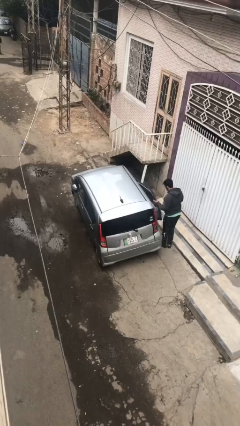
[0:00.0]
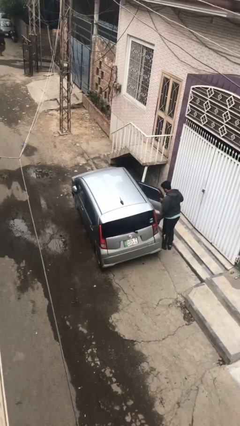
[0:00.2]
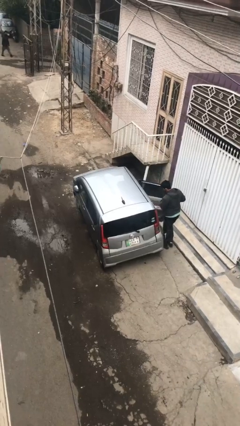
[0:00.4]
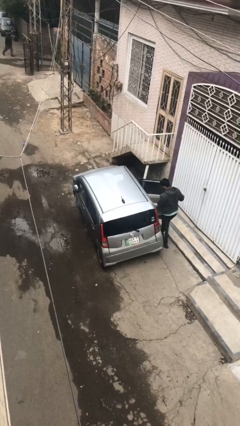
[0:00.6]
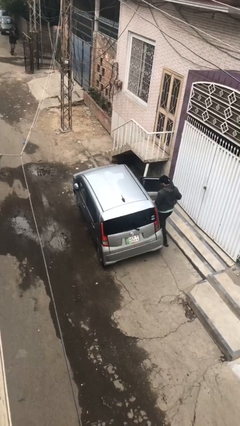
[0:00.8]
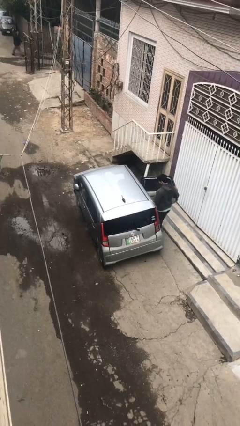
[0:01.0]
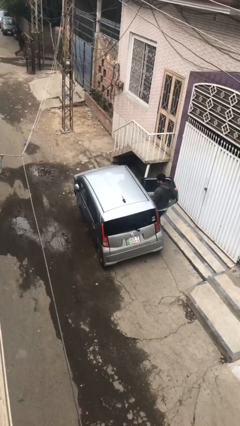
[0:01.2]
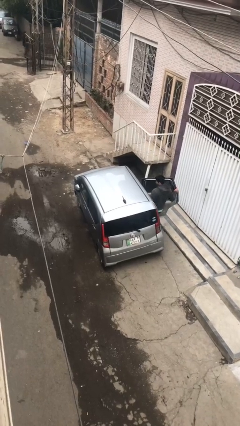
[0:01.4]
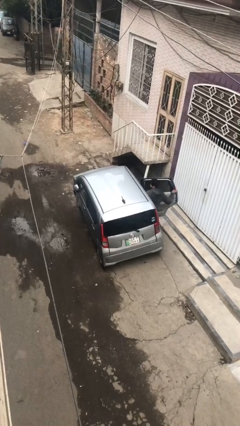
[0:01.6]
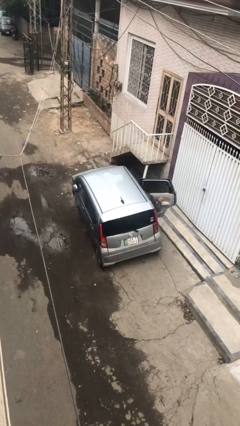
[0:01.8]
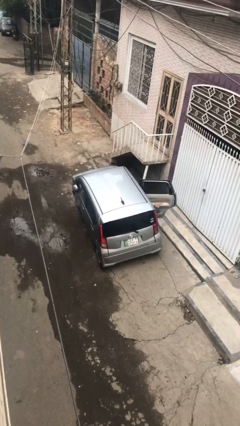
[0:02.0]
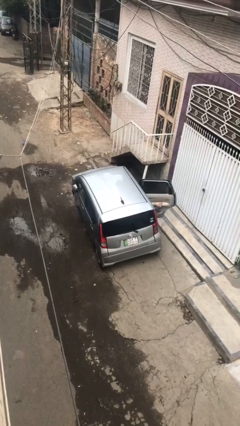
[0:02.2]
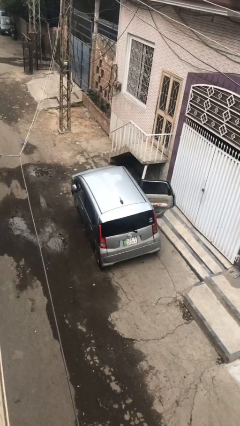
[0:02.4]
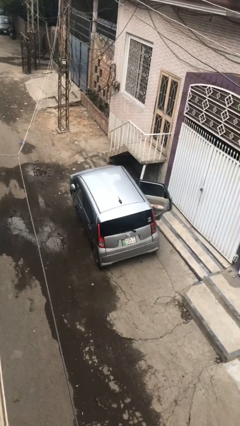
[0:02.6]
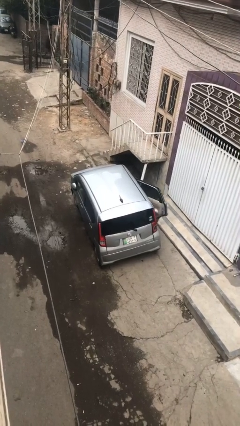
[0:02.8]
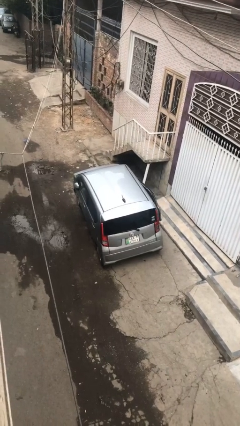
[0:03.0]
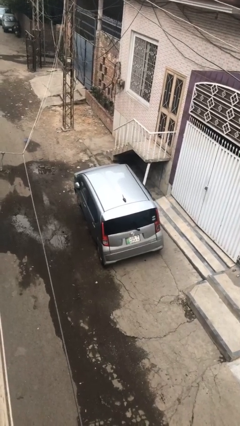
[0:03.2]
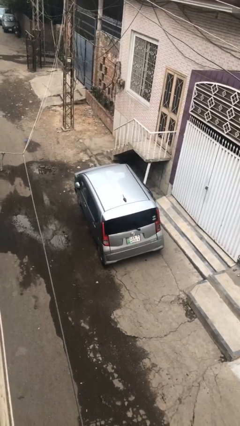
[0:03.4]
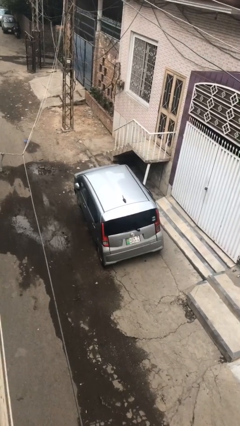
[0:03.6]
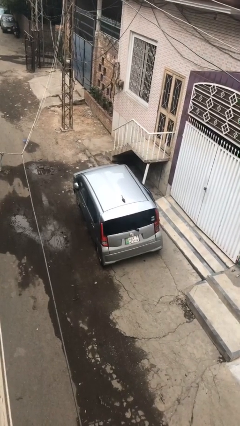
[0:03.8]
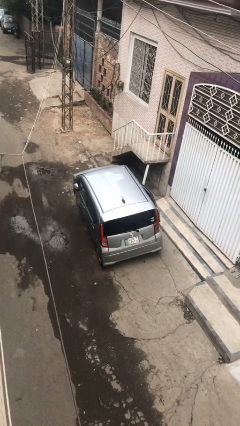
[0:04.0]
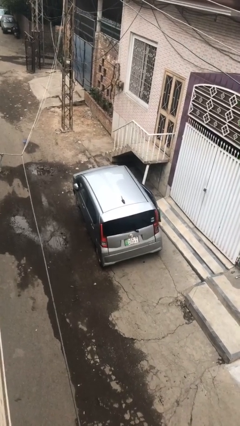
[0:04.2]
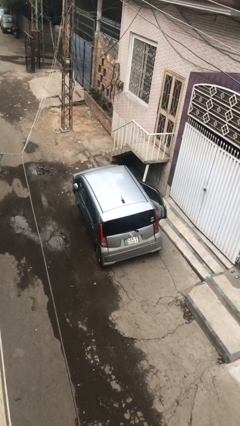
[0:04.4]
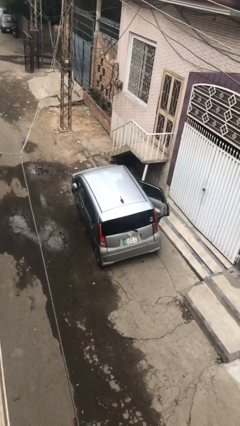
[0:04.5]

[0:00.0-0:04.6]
car picks up person

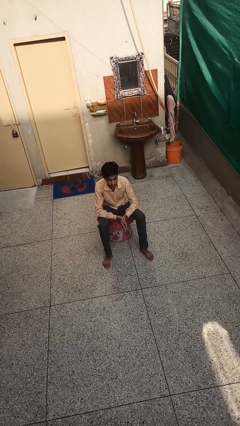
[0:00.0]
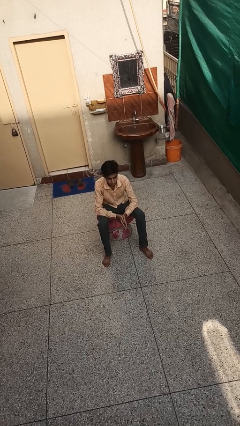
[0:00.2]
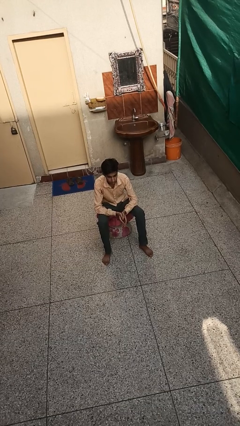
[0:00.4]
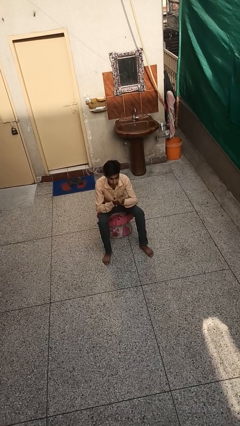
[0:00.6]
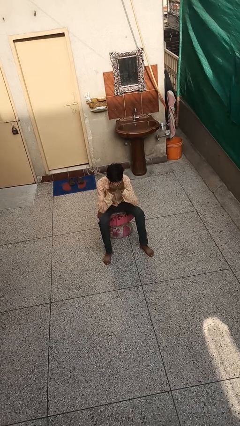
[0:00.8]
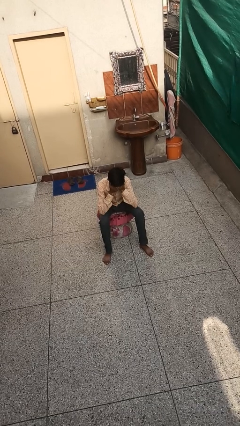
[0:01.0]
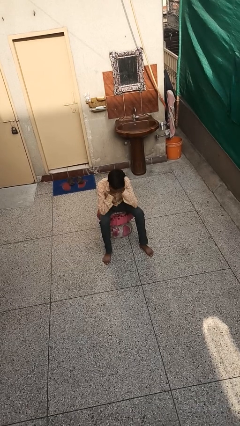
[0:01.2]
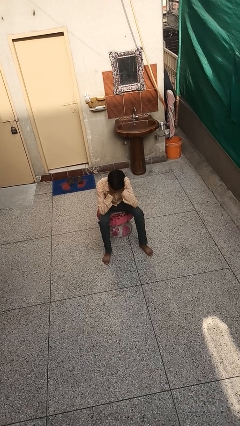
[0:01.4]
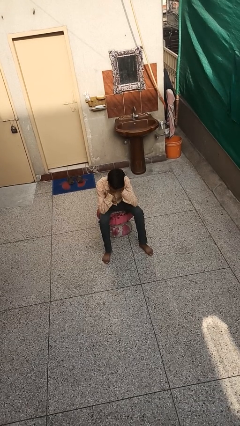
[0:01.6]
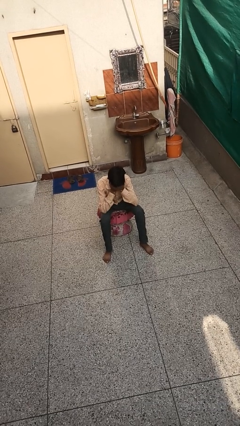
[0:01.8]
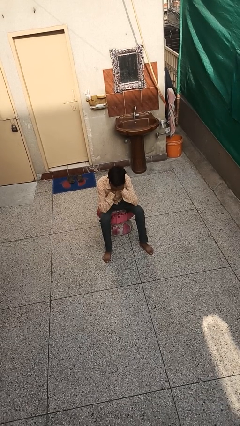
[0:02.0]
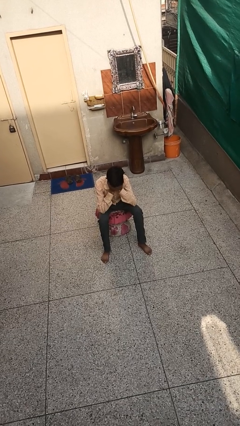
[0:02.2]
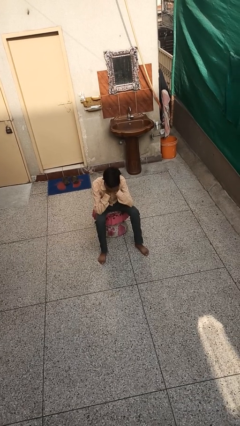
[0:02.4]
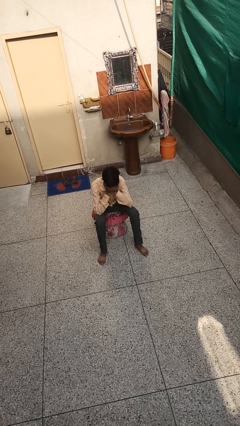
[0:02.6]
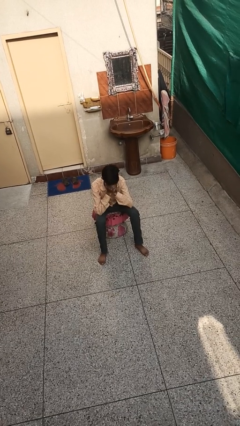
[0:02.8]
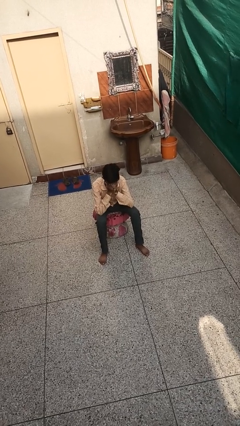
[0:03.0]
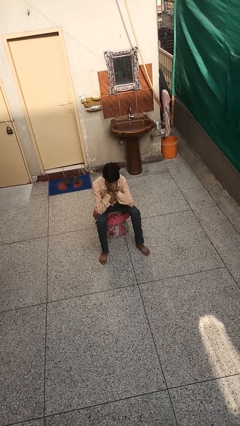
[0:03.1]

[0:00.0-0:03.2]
person covers face with hands

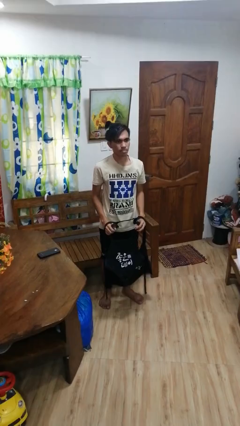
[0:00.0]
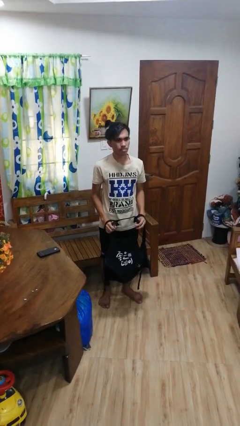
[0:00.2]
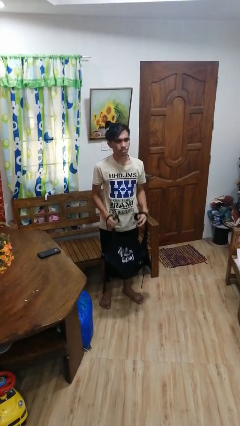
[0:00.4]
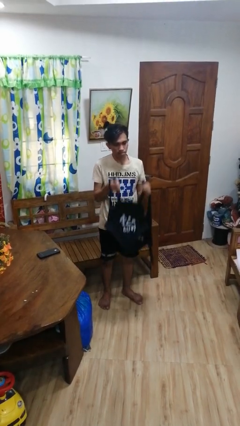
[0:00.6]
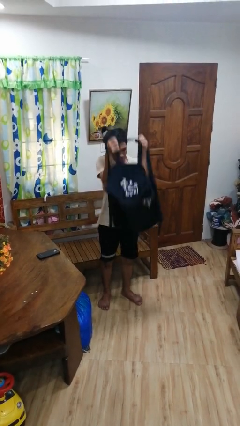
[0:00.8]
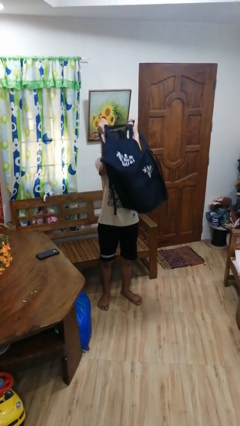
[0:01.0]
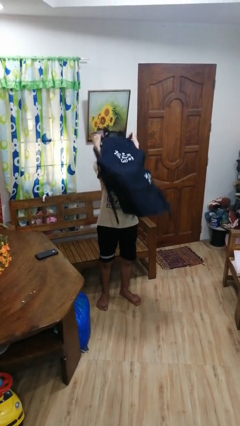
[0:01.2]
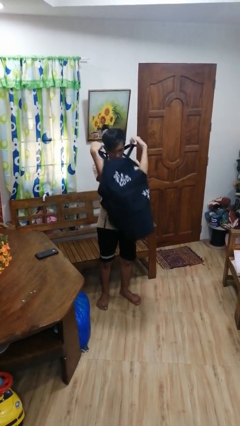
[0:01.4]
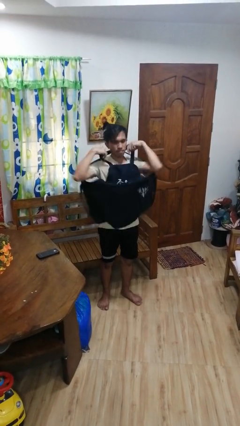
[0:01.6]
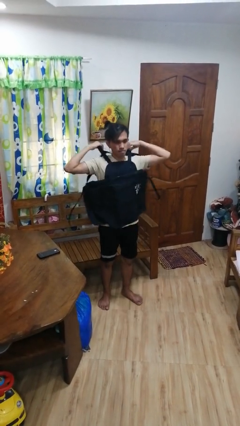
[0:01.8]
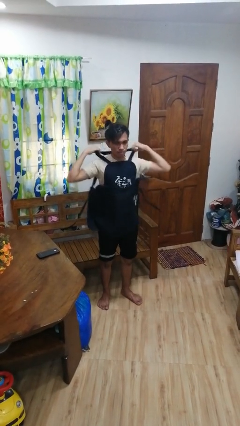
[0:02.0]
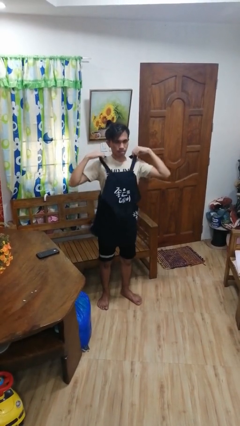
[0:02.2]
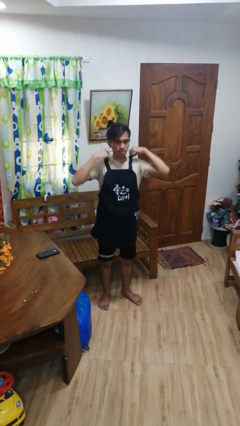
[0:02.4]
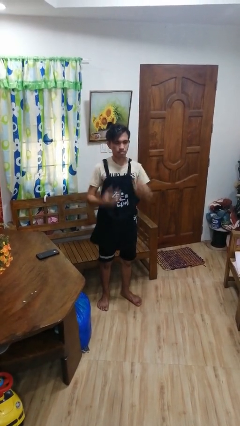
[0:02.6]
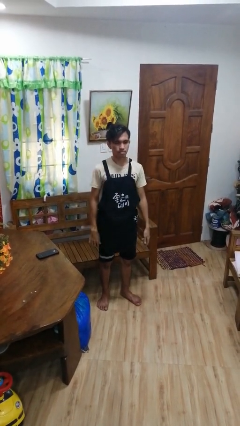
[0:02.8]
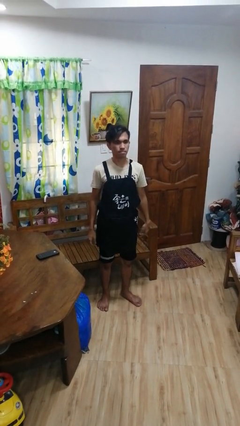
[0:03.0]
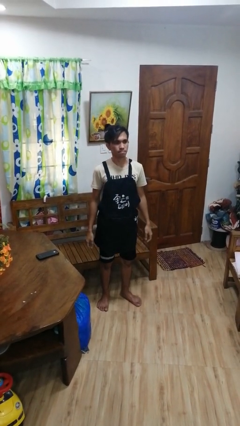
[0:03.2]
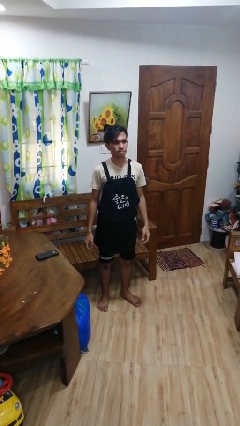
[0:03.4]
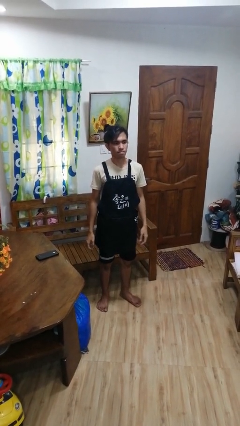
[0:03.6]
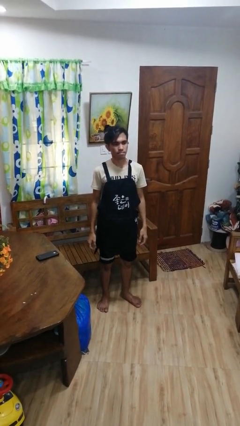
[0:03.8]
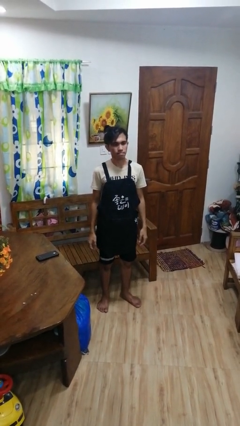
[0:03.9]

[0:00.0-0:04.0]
person puts on apron

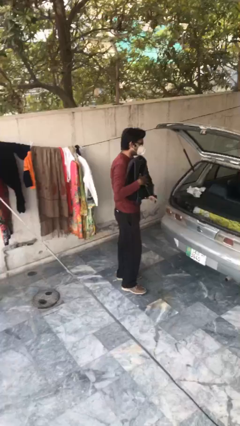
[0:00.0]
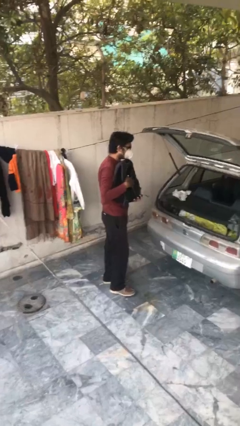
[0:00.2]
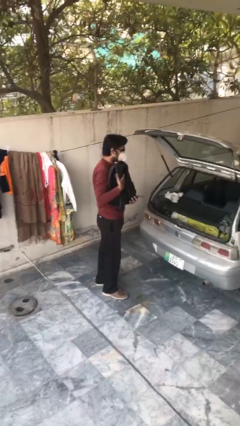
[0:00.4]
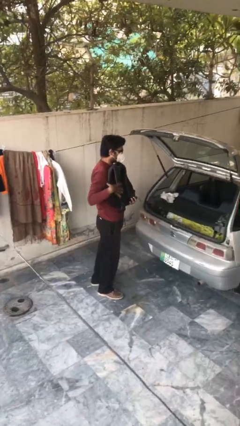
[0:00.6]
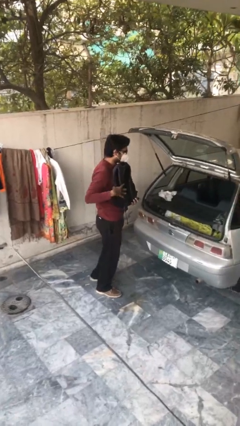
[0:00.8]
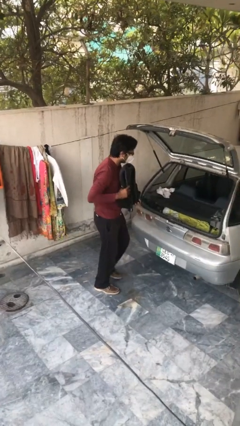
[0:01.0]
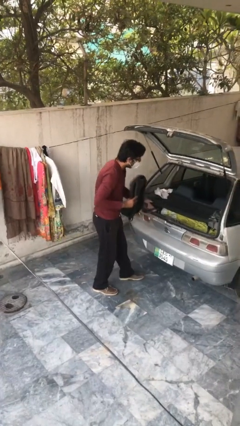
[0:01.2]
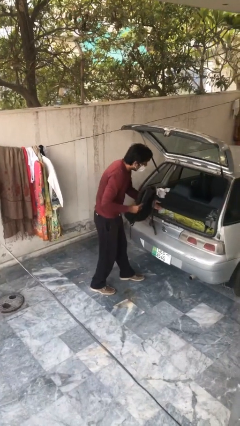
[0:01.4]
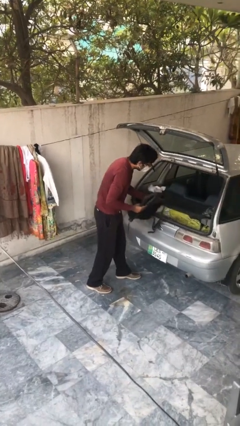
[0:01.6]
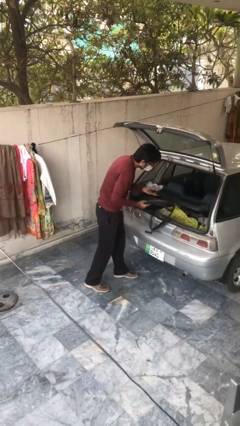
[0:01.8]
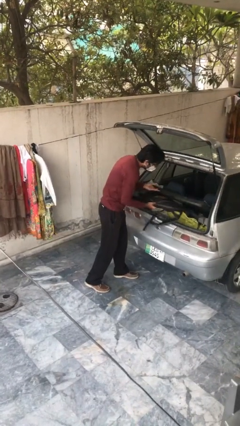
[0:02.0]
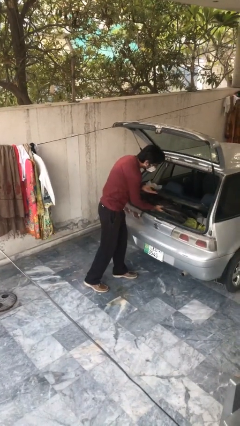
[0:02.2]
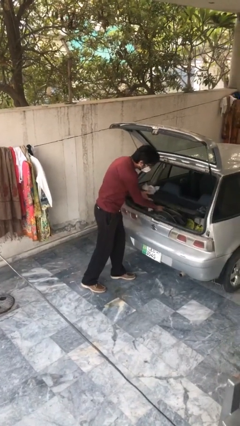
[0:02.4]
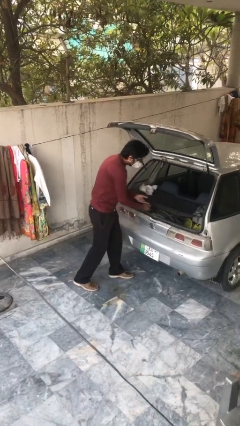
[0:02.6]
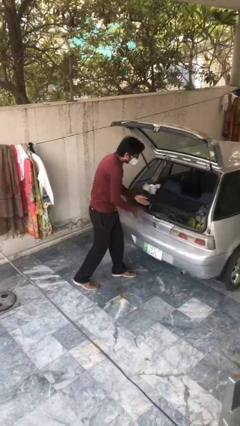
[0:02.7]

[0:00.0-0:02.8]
person loads car

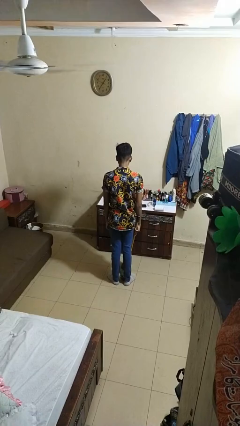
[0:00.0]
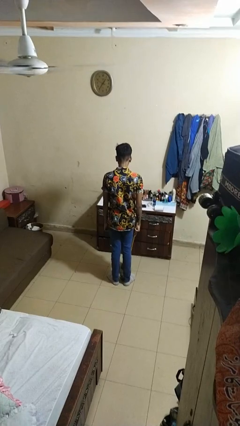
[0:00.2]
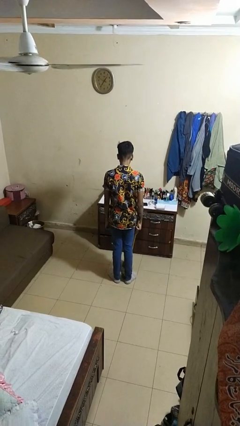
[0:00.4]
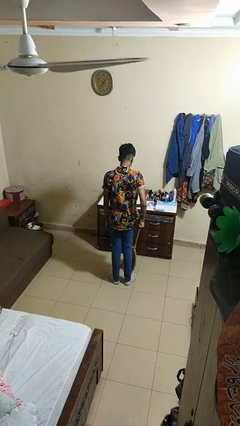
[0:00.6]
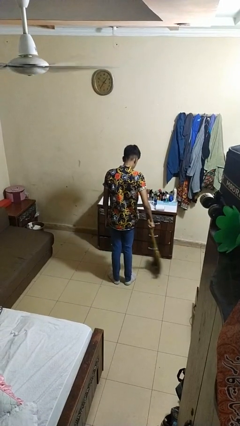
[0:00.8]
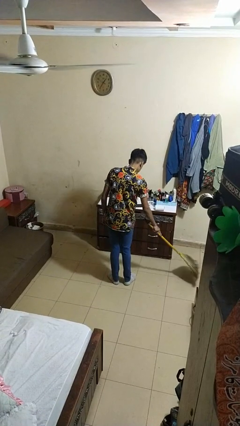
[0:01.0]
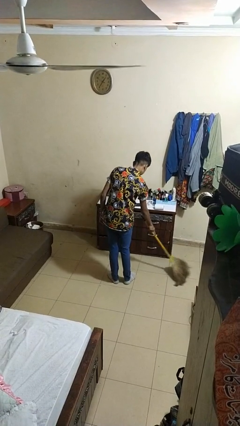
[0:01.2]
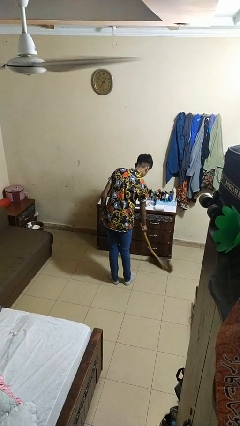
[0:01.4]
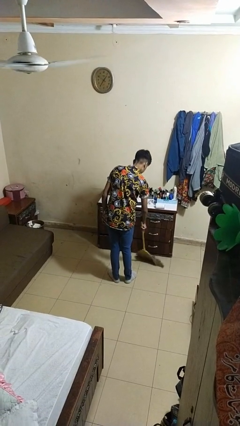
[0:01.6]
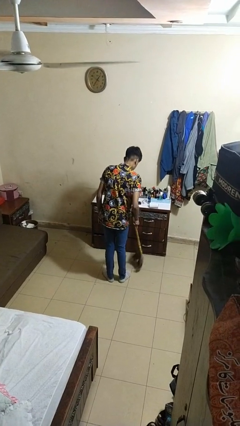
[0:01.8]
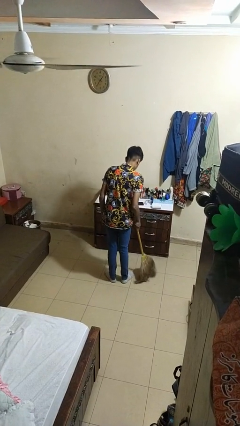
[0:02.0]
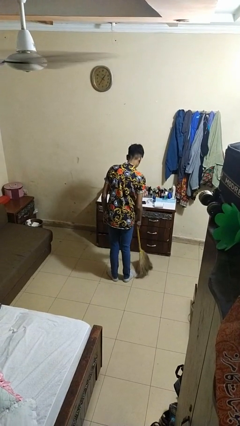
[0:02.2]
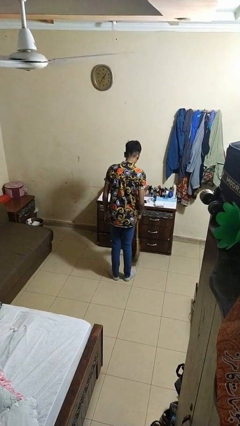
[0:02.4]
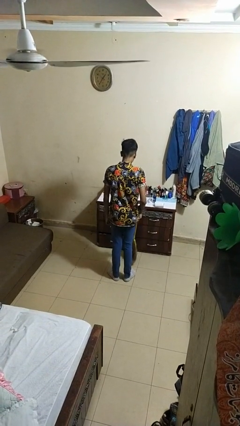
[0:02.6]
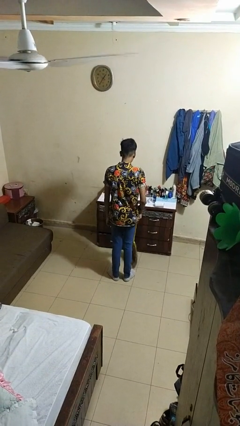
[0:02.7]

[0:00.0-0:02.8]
person sweeps floor
